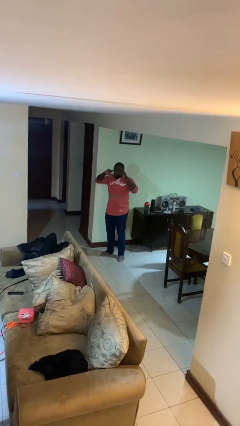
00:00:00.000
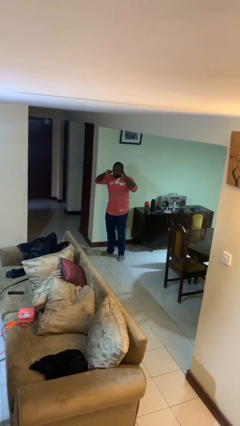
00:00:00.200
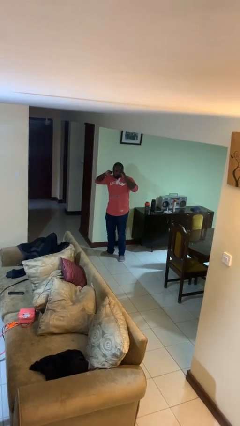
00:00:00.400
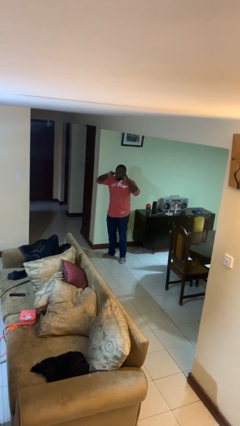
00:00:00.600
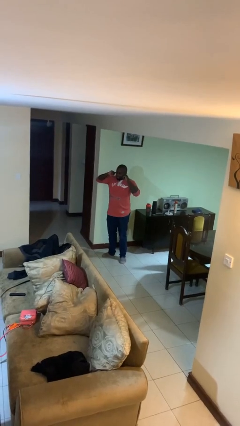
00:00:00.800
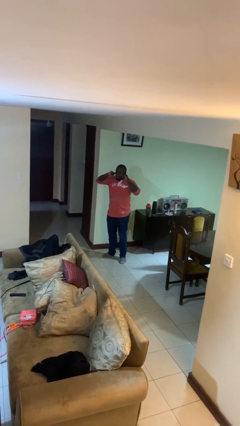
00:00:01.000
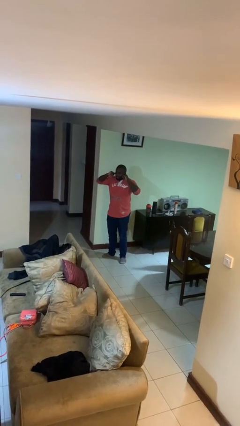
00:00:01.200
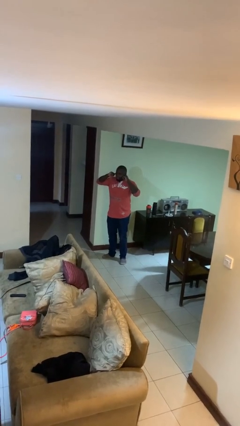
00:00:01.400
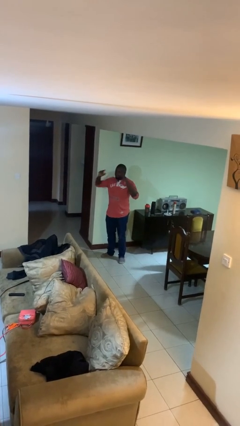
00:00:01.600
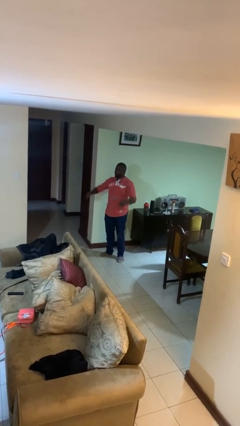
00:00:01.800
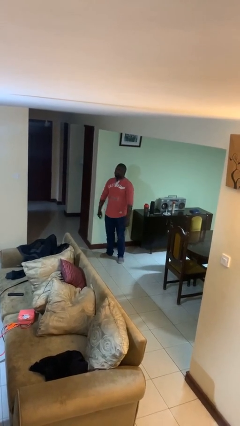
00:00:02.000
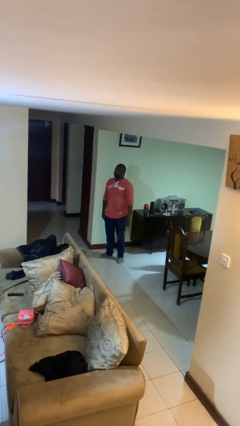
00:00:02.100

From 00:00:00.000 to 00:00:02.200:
person puts fingers in ear

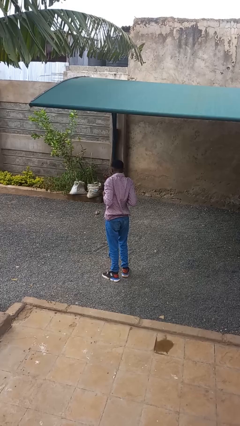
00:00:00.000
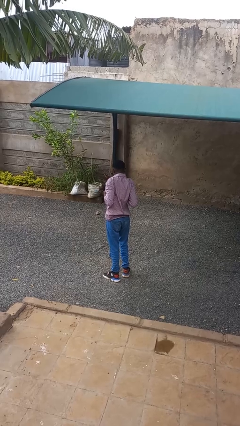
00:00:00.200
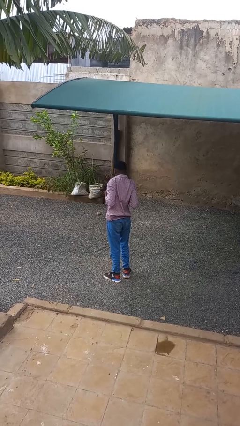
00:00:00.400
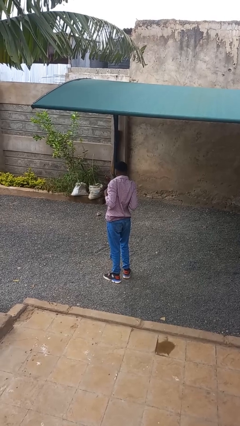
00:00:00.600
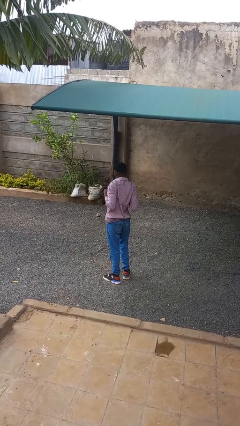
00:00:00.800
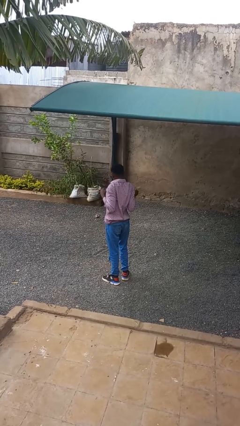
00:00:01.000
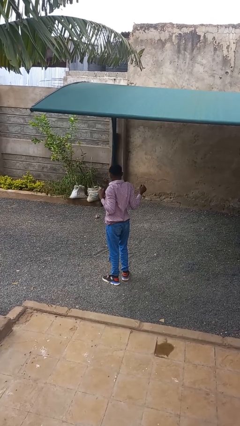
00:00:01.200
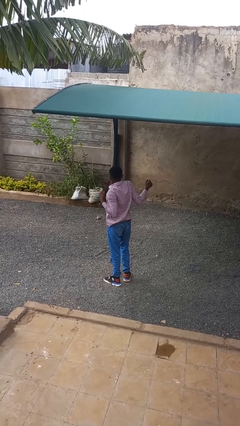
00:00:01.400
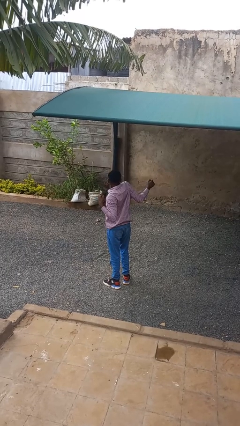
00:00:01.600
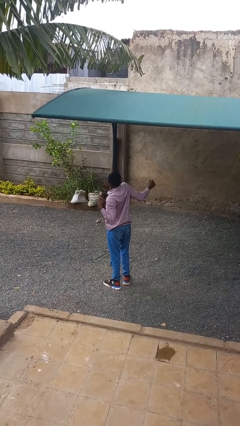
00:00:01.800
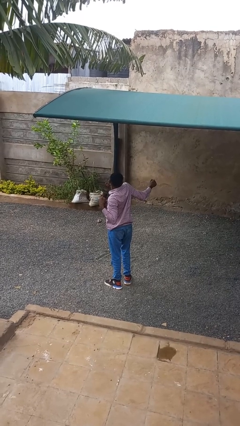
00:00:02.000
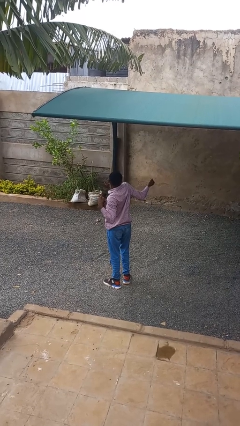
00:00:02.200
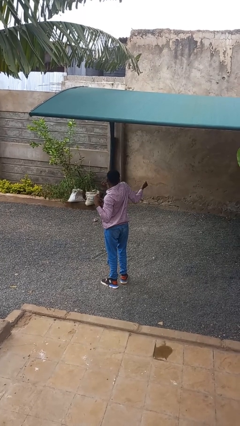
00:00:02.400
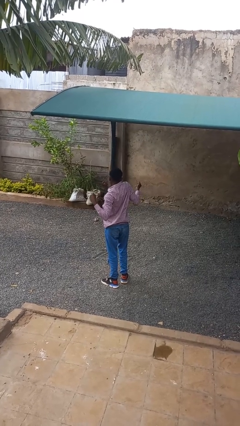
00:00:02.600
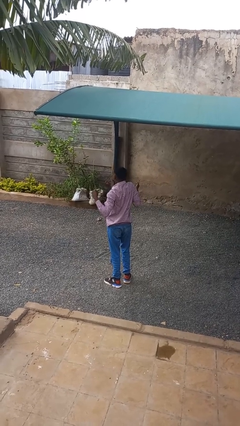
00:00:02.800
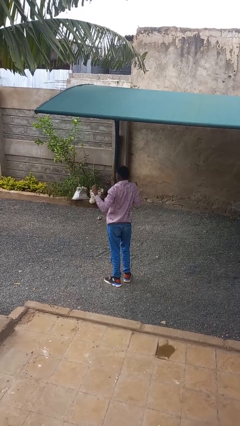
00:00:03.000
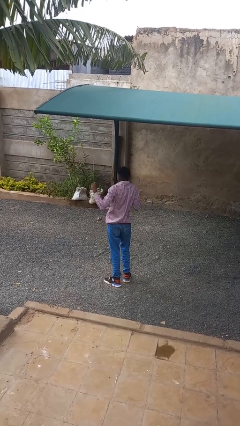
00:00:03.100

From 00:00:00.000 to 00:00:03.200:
person stretches arms to side

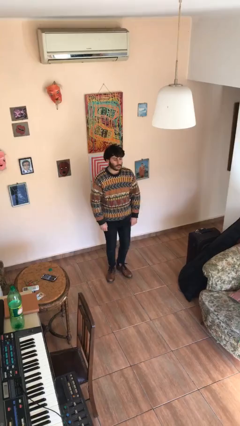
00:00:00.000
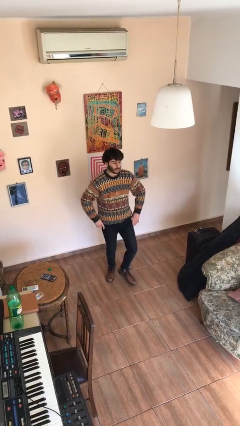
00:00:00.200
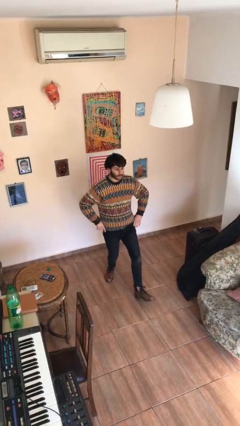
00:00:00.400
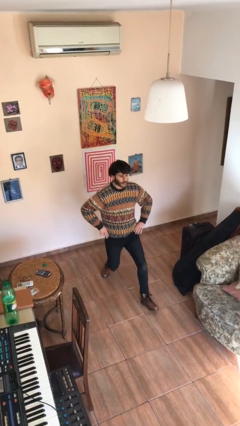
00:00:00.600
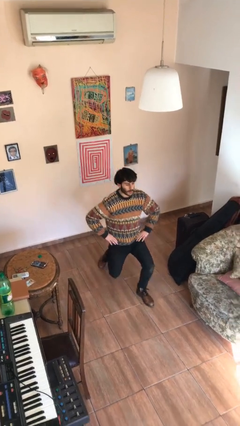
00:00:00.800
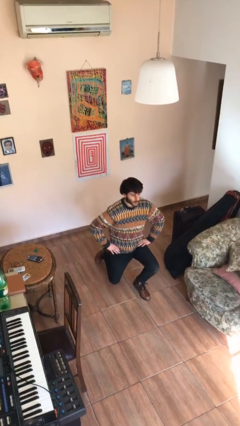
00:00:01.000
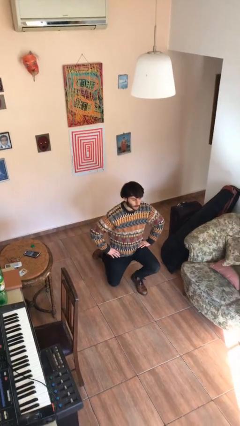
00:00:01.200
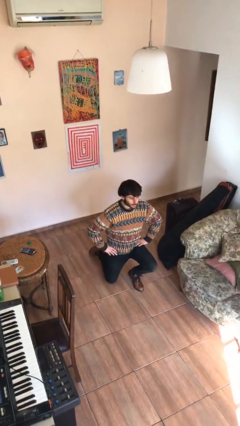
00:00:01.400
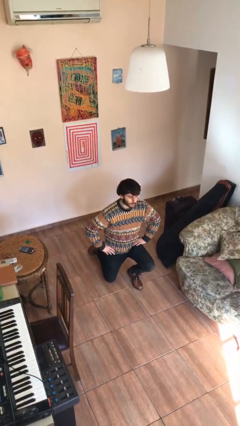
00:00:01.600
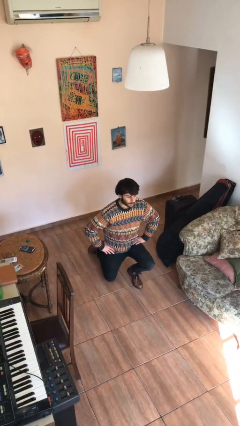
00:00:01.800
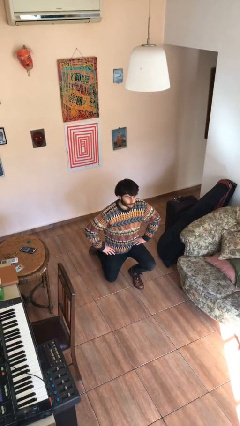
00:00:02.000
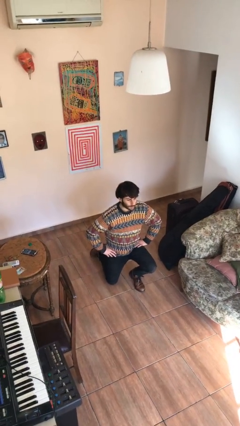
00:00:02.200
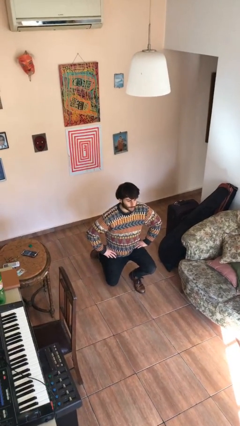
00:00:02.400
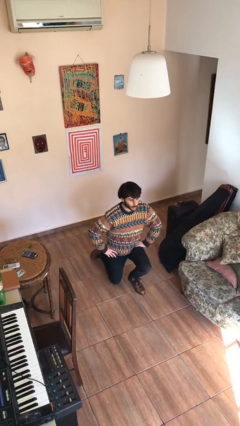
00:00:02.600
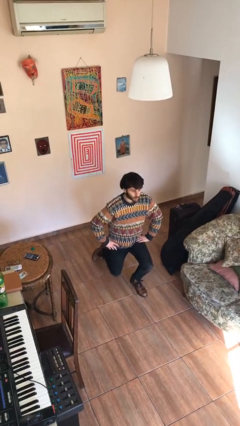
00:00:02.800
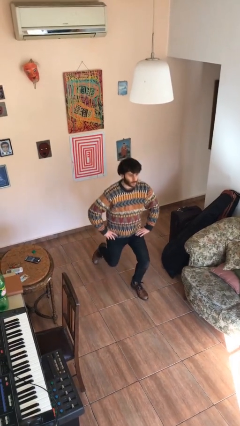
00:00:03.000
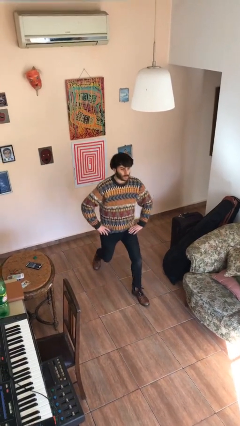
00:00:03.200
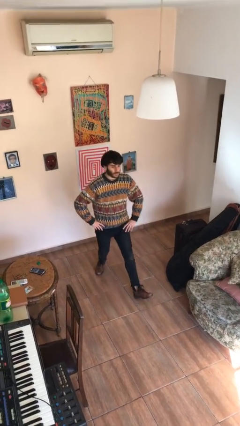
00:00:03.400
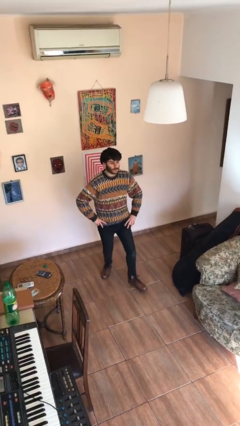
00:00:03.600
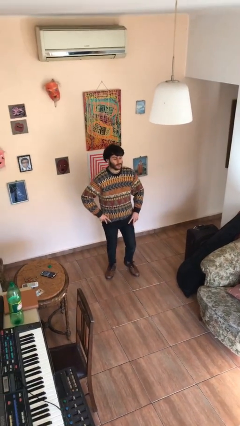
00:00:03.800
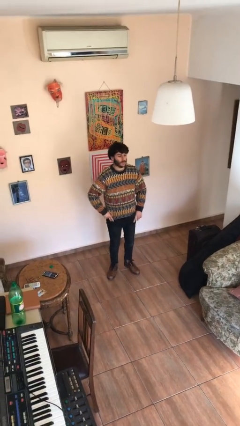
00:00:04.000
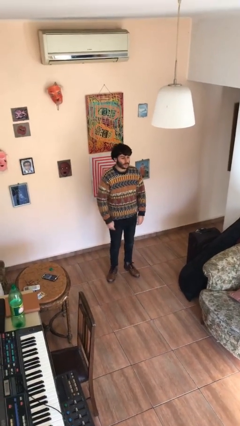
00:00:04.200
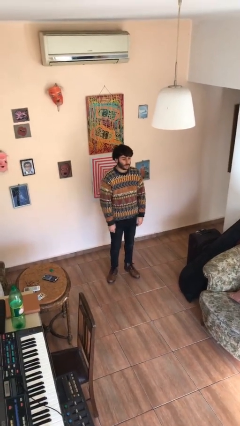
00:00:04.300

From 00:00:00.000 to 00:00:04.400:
person exercises with lunges

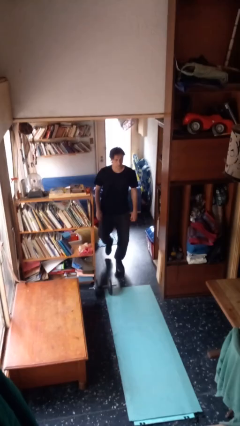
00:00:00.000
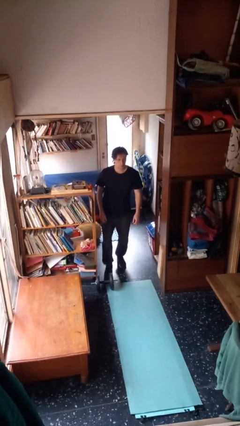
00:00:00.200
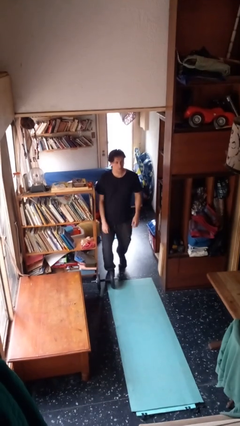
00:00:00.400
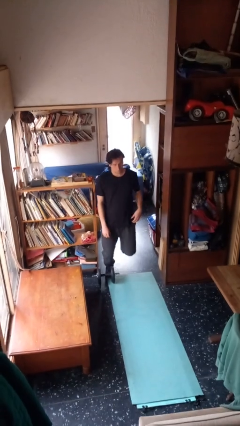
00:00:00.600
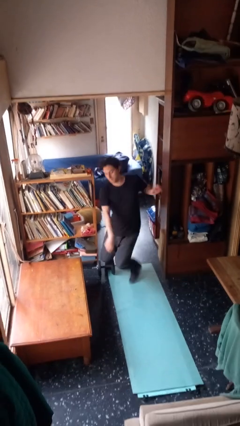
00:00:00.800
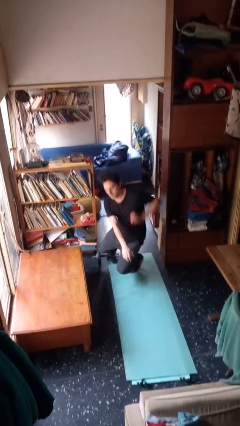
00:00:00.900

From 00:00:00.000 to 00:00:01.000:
person trips on object on floor

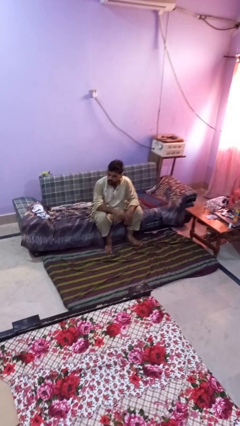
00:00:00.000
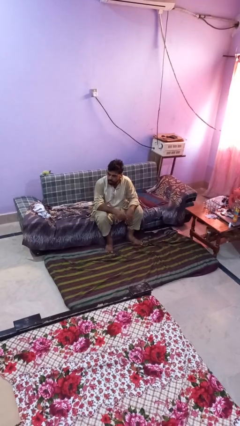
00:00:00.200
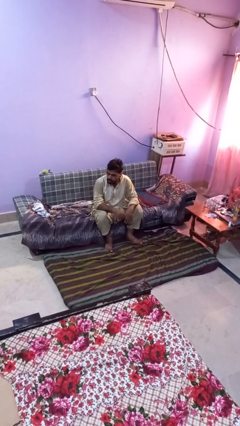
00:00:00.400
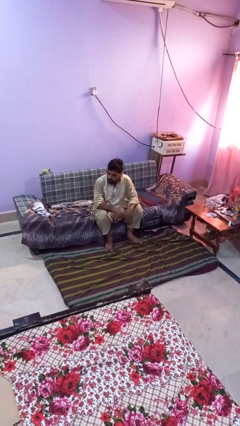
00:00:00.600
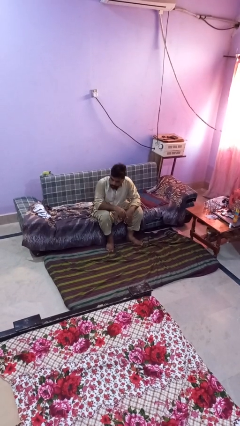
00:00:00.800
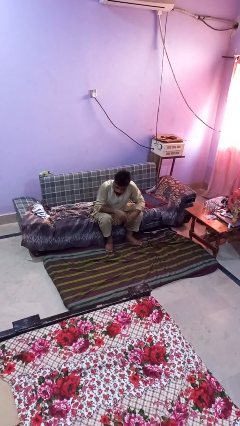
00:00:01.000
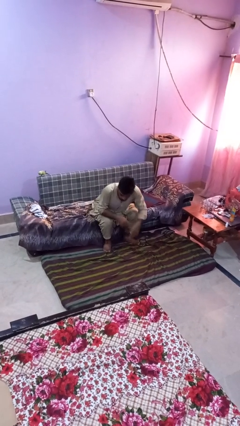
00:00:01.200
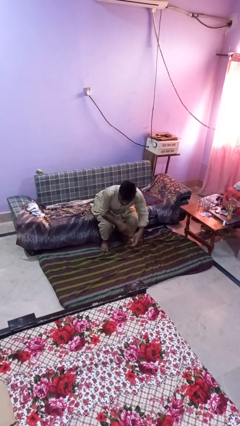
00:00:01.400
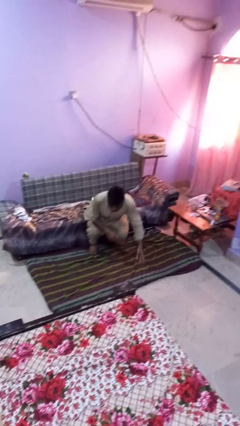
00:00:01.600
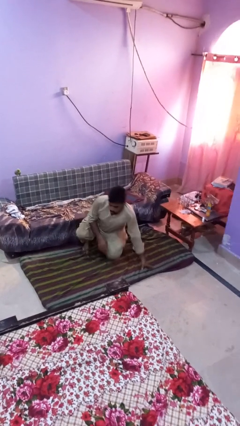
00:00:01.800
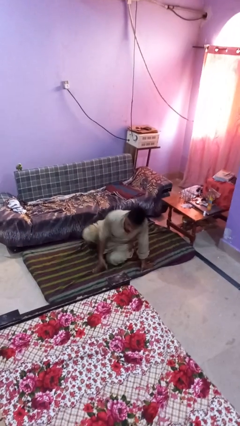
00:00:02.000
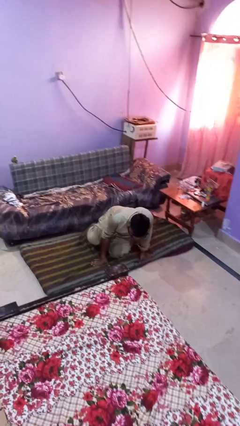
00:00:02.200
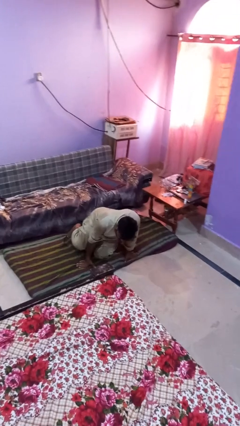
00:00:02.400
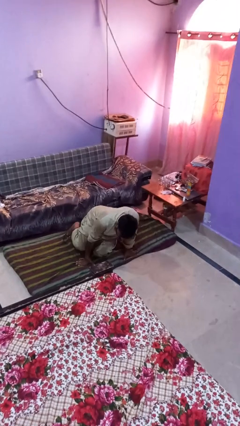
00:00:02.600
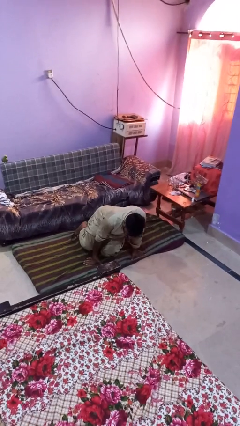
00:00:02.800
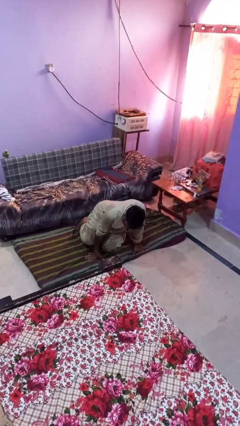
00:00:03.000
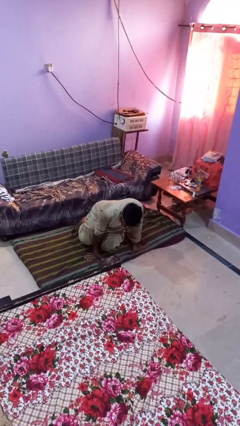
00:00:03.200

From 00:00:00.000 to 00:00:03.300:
person falls from chair

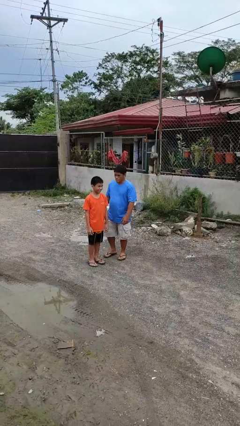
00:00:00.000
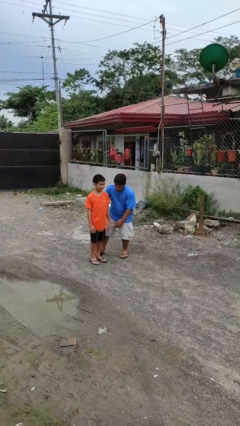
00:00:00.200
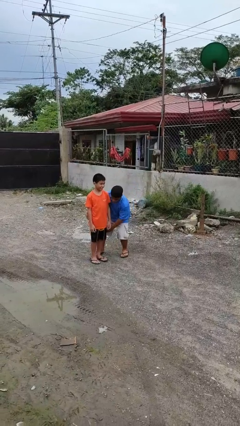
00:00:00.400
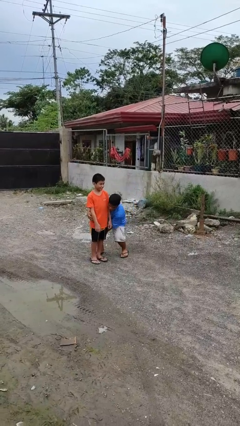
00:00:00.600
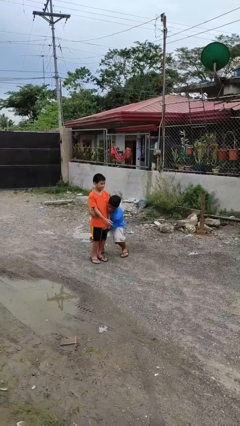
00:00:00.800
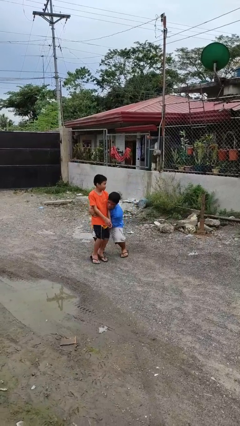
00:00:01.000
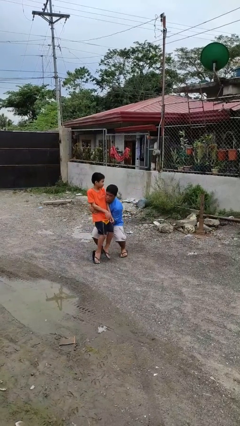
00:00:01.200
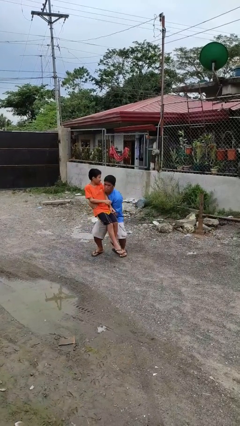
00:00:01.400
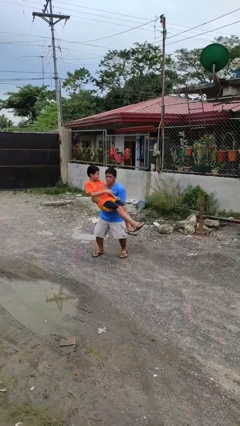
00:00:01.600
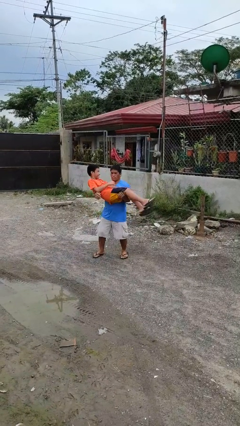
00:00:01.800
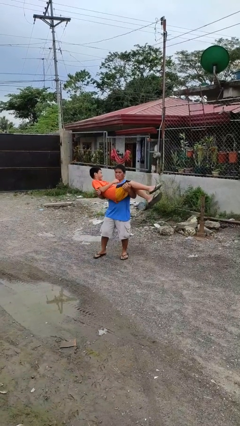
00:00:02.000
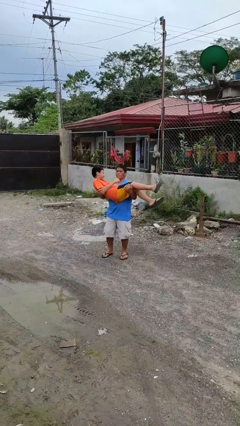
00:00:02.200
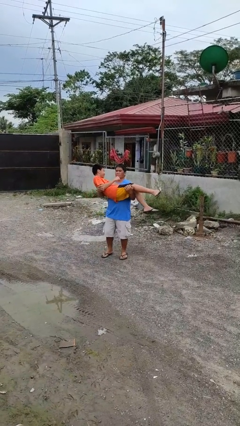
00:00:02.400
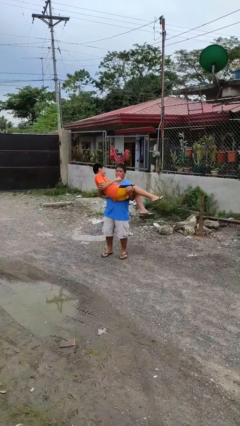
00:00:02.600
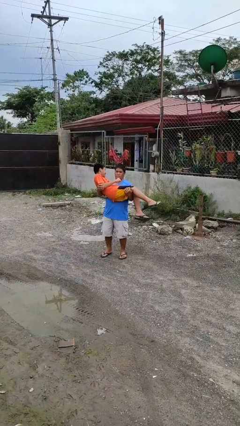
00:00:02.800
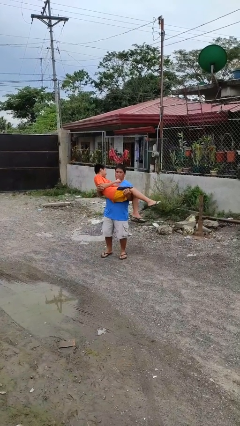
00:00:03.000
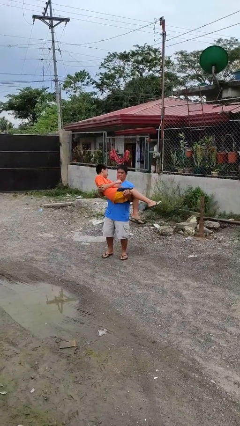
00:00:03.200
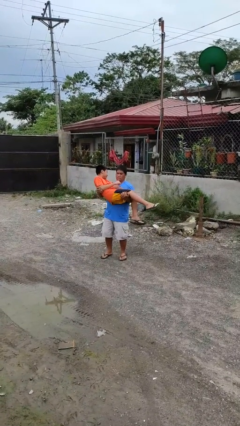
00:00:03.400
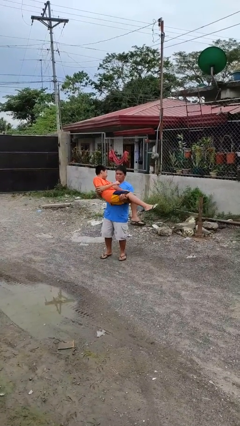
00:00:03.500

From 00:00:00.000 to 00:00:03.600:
person picks up person
